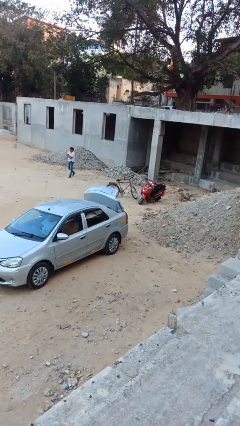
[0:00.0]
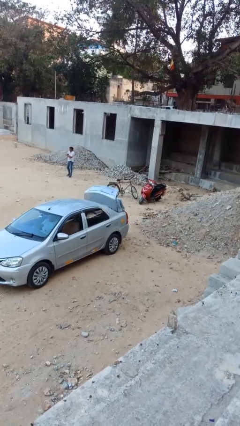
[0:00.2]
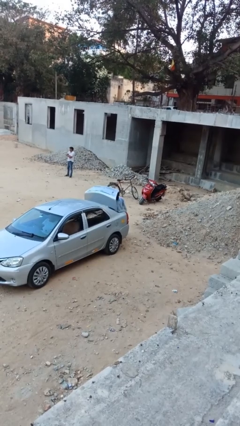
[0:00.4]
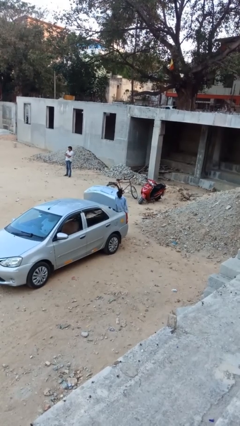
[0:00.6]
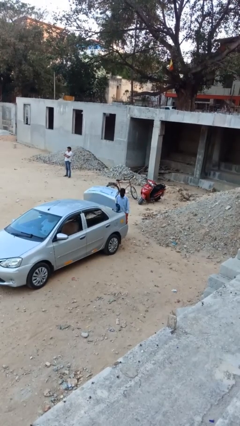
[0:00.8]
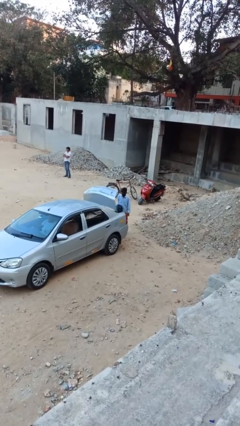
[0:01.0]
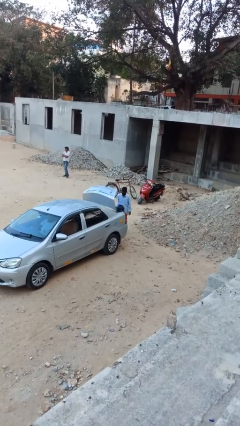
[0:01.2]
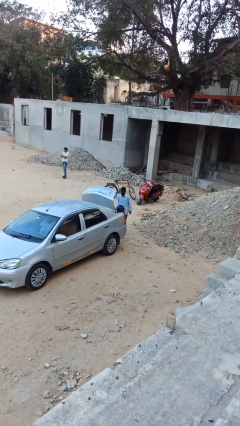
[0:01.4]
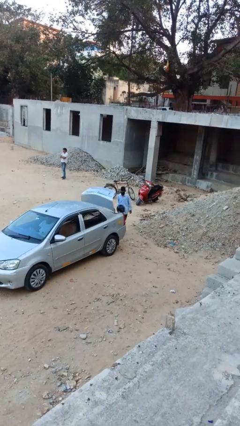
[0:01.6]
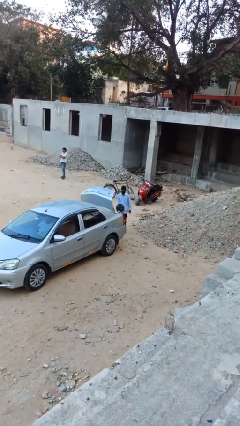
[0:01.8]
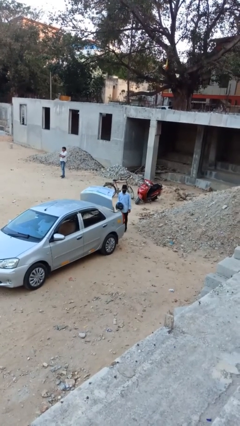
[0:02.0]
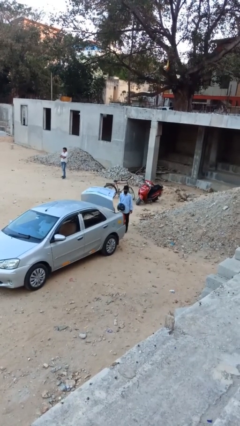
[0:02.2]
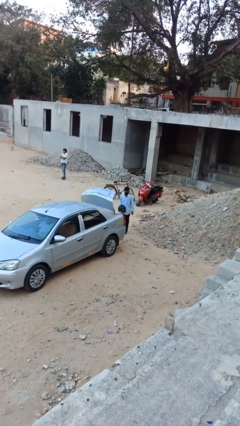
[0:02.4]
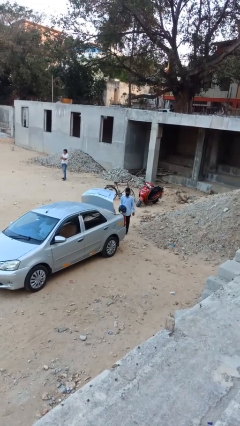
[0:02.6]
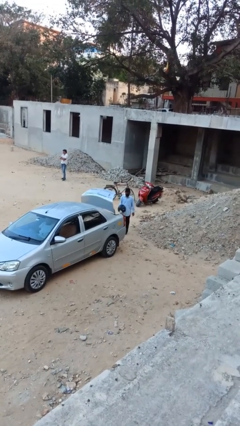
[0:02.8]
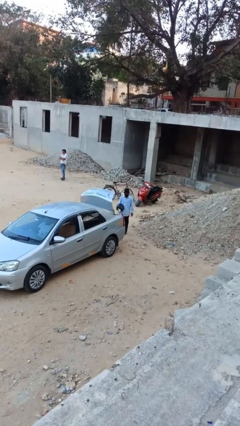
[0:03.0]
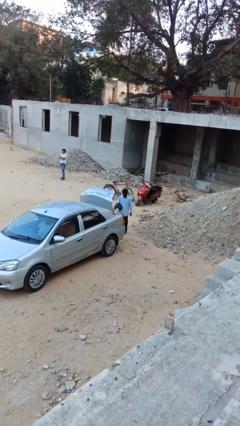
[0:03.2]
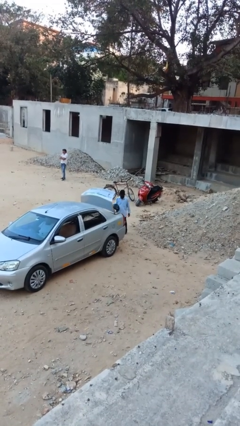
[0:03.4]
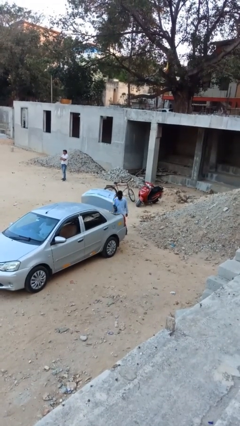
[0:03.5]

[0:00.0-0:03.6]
person unloads car

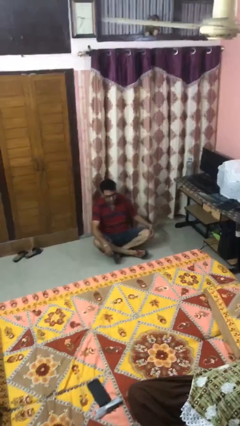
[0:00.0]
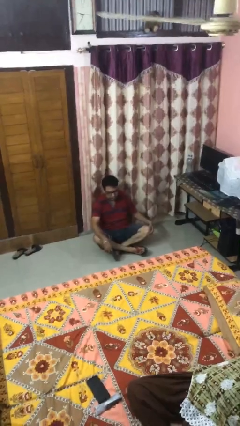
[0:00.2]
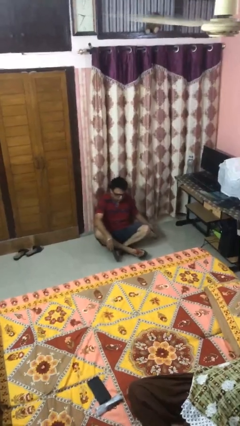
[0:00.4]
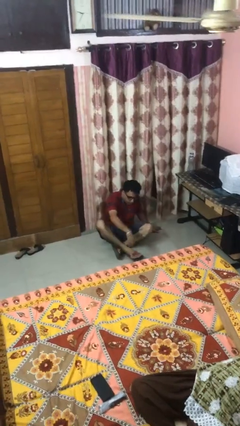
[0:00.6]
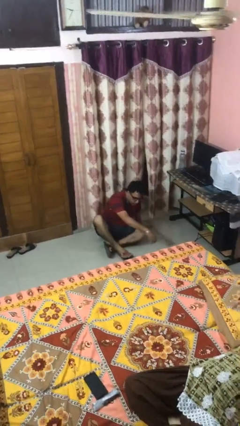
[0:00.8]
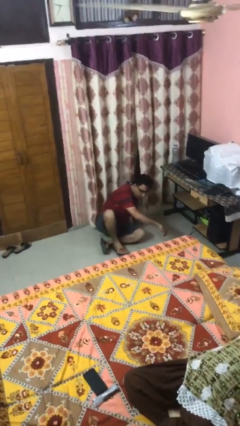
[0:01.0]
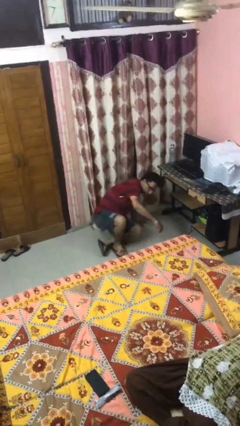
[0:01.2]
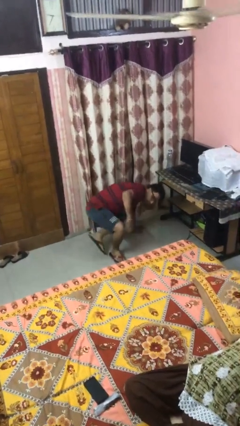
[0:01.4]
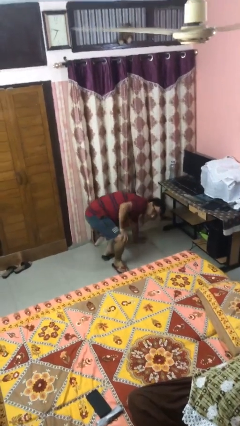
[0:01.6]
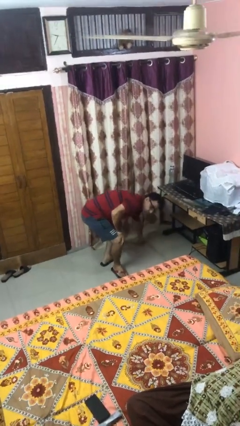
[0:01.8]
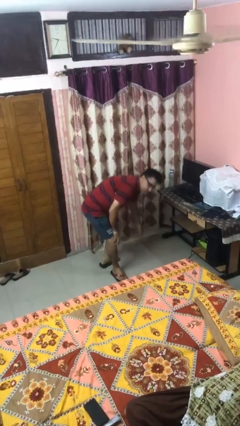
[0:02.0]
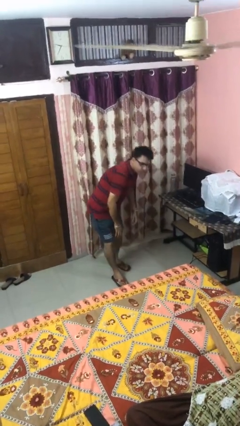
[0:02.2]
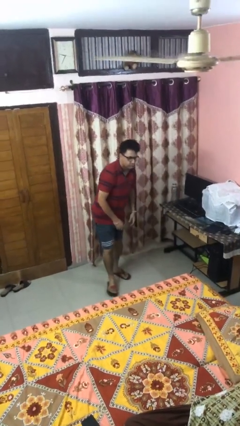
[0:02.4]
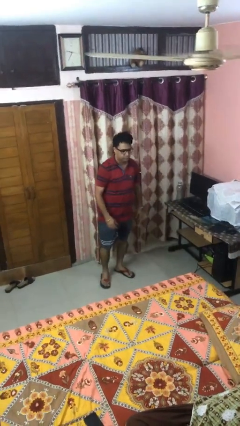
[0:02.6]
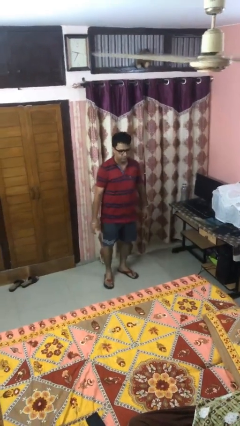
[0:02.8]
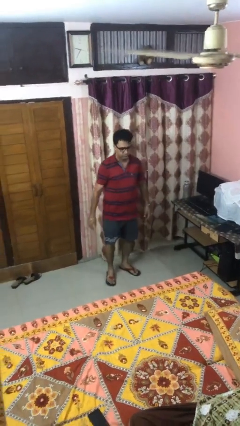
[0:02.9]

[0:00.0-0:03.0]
person stands up from floor

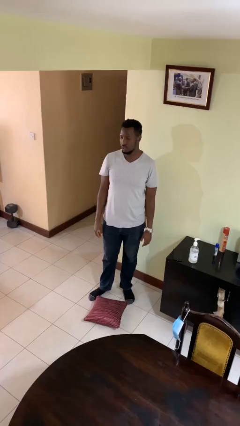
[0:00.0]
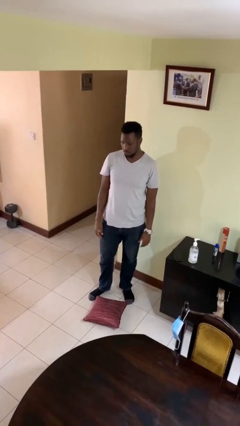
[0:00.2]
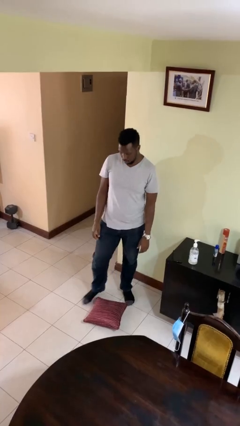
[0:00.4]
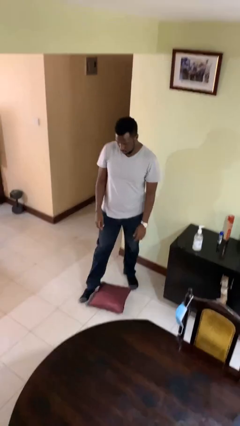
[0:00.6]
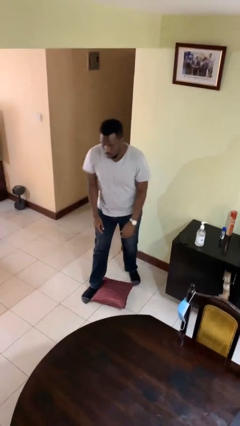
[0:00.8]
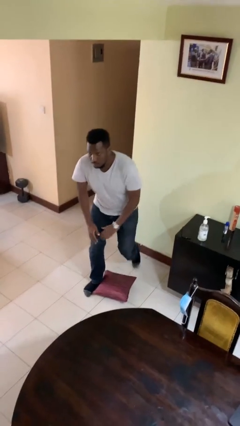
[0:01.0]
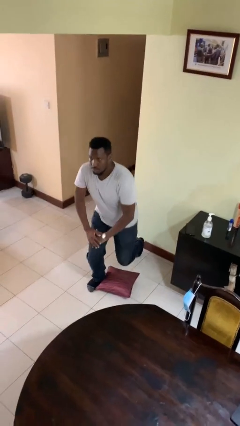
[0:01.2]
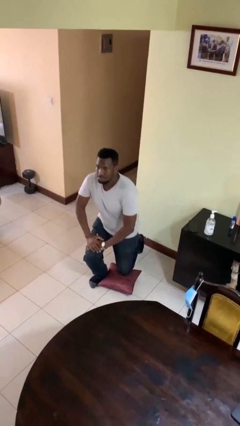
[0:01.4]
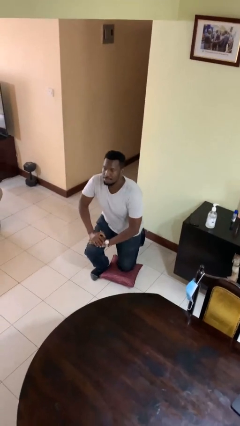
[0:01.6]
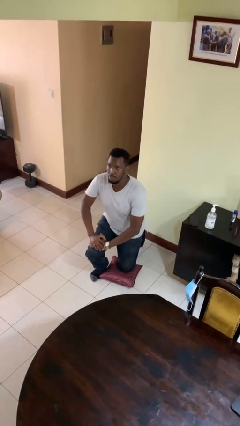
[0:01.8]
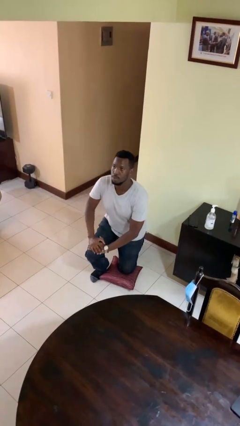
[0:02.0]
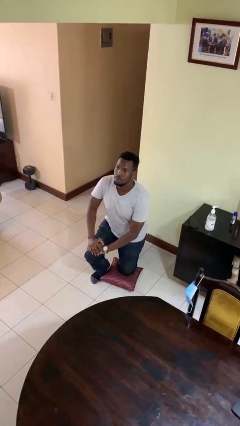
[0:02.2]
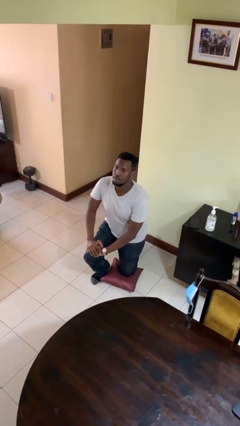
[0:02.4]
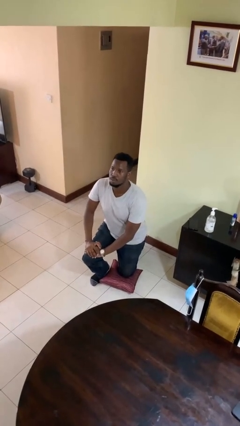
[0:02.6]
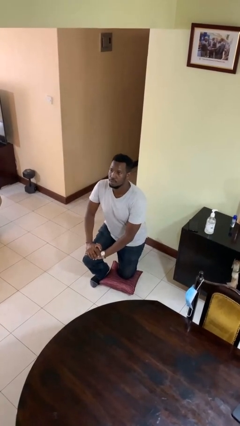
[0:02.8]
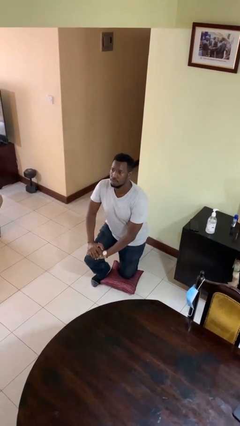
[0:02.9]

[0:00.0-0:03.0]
person kneels

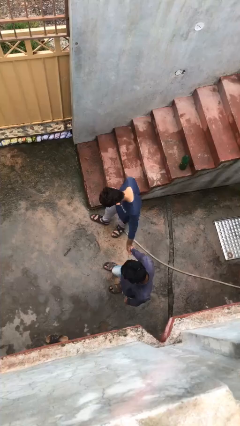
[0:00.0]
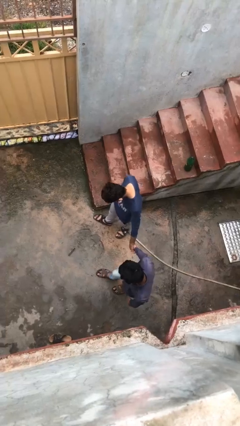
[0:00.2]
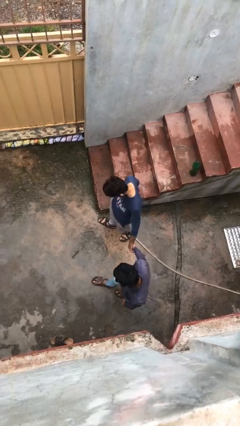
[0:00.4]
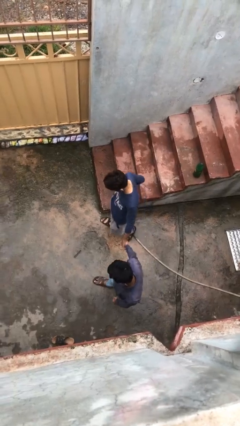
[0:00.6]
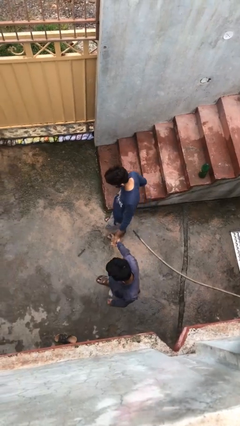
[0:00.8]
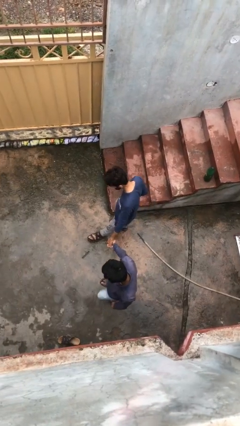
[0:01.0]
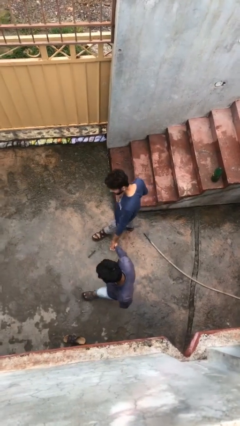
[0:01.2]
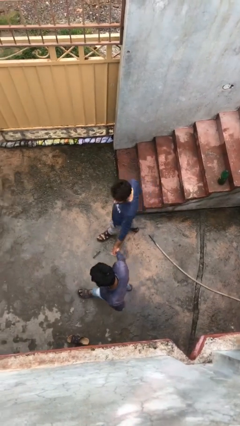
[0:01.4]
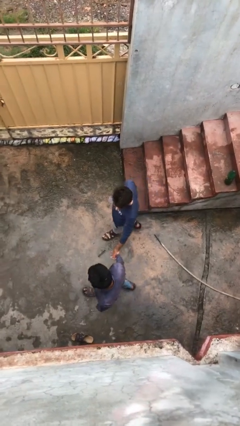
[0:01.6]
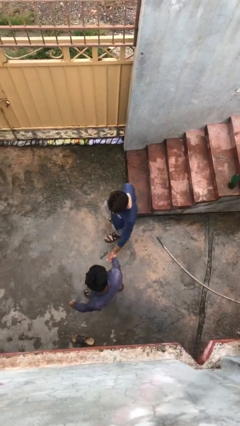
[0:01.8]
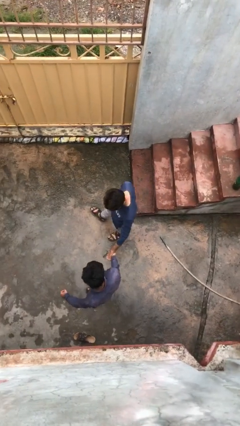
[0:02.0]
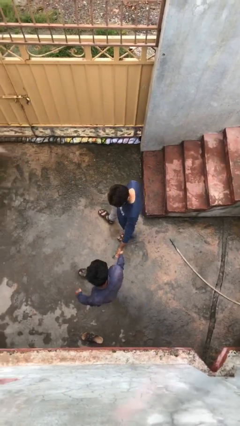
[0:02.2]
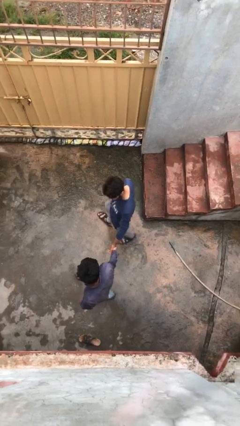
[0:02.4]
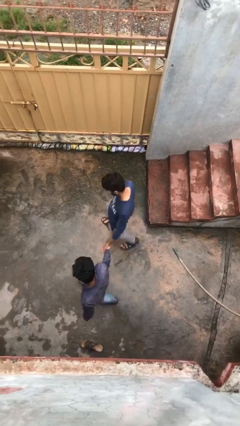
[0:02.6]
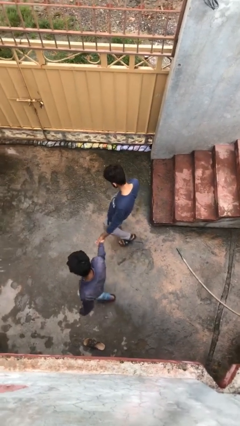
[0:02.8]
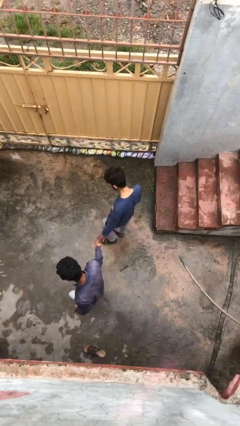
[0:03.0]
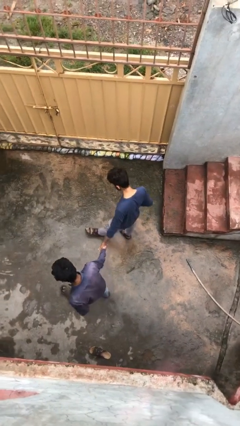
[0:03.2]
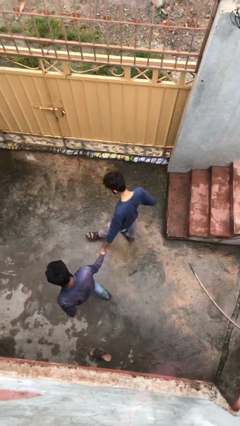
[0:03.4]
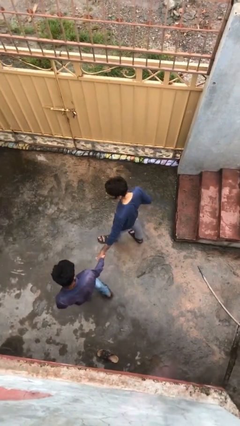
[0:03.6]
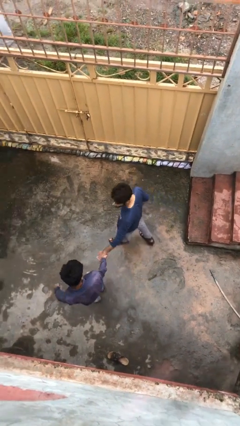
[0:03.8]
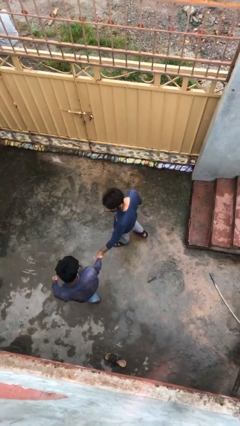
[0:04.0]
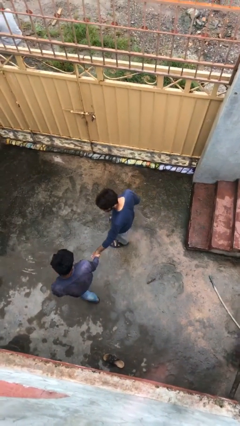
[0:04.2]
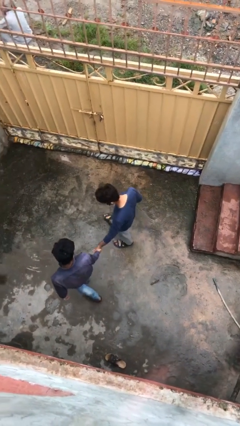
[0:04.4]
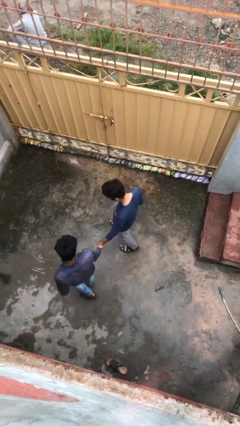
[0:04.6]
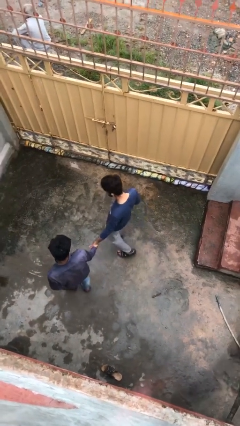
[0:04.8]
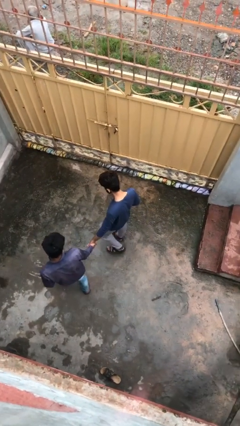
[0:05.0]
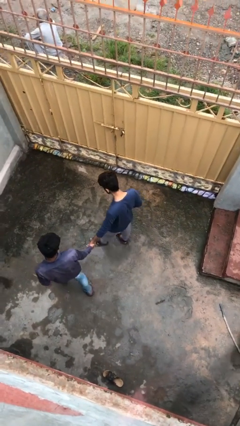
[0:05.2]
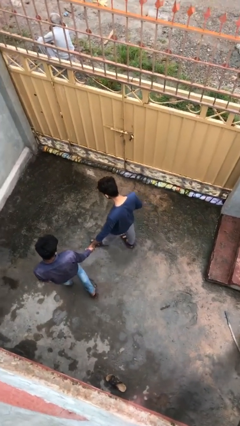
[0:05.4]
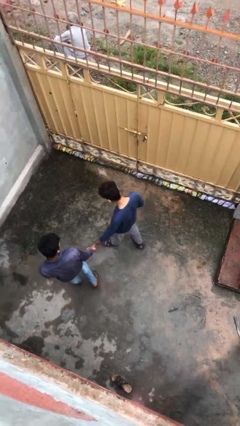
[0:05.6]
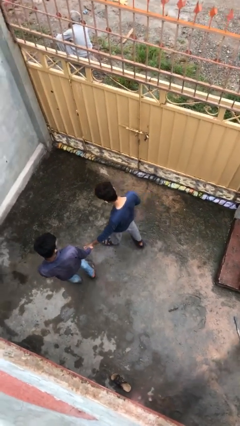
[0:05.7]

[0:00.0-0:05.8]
person holds hand

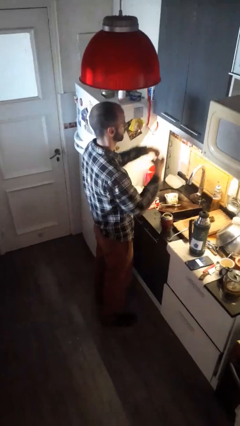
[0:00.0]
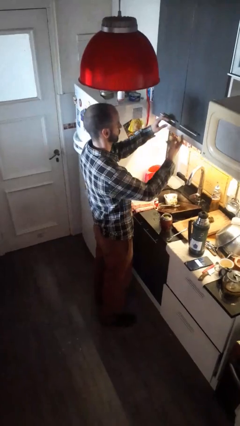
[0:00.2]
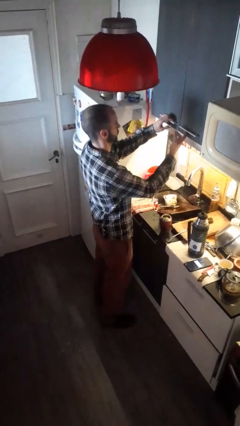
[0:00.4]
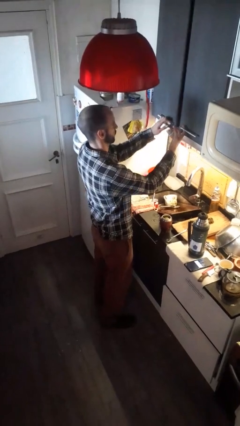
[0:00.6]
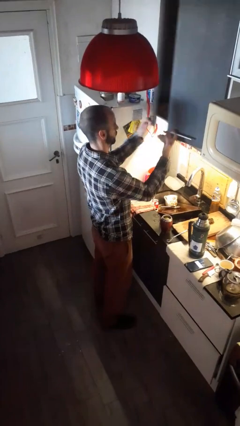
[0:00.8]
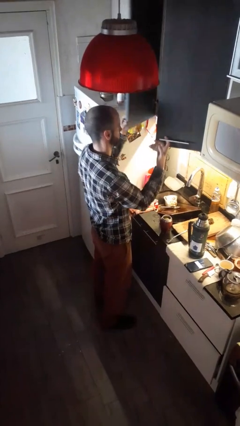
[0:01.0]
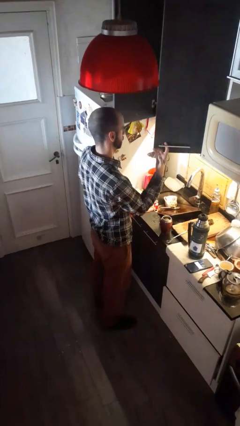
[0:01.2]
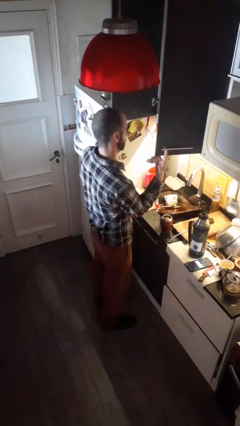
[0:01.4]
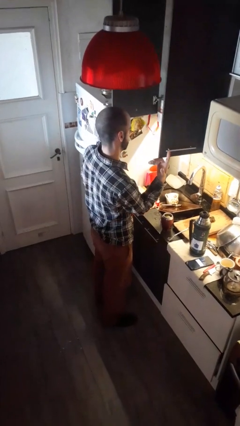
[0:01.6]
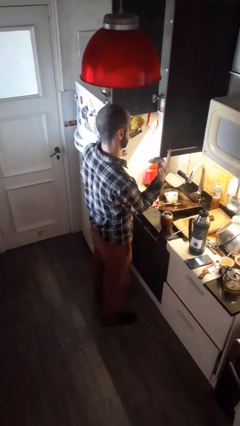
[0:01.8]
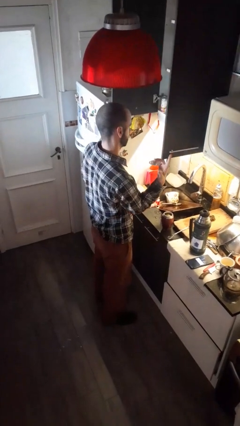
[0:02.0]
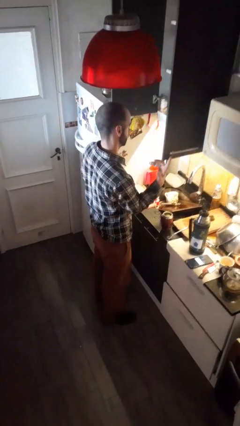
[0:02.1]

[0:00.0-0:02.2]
person opens kitchen drawer
